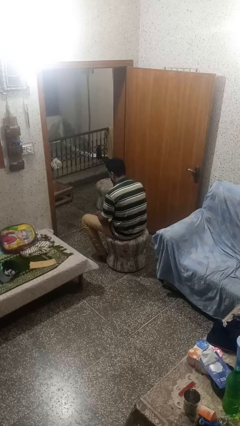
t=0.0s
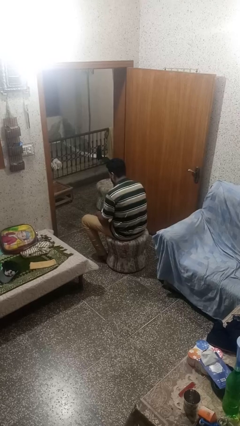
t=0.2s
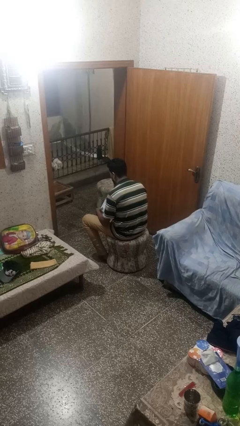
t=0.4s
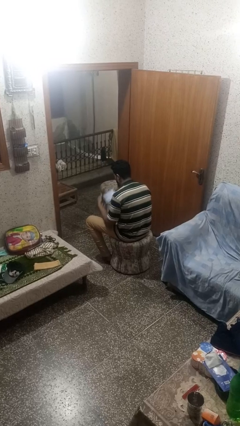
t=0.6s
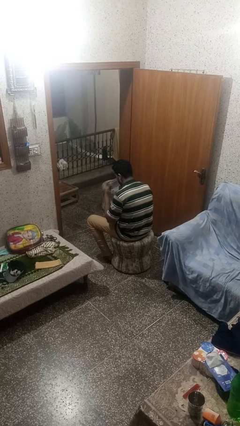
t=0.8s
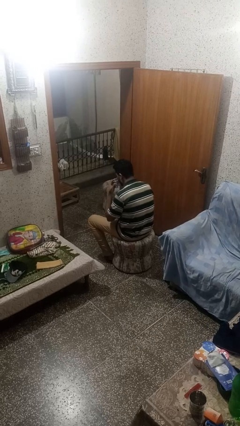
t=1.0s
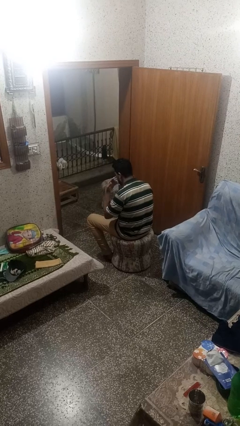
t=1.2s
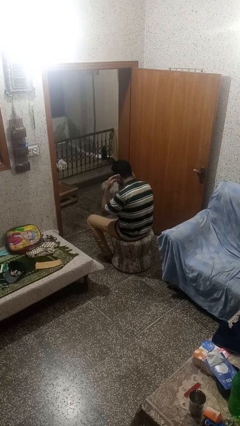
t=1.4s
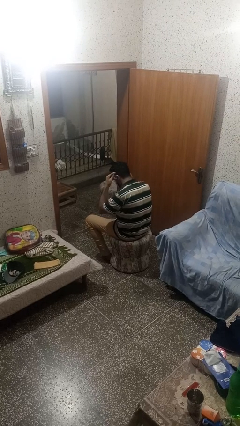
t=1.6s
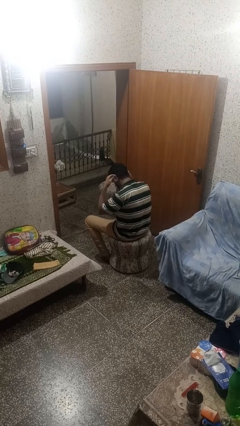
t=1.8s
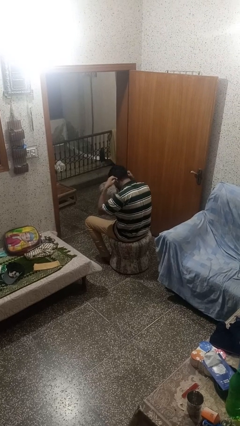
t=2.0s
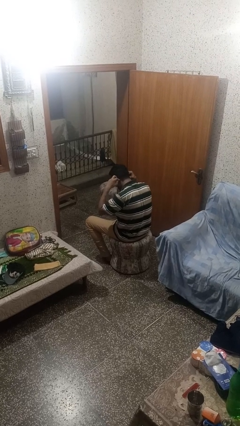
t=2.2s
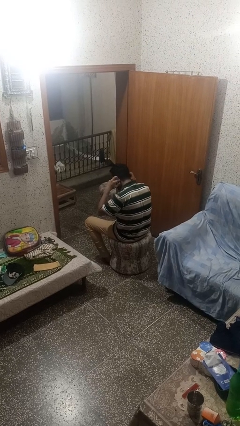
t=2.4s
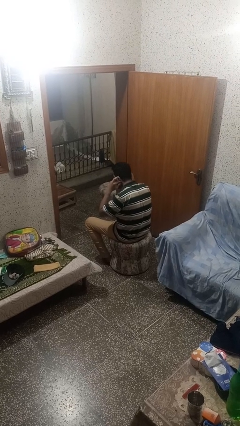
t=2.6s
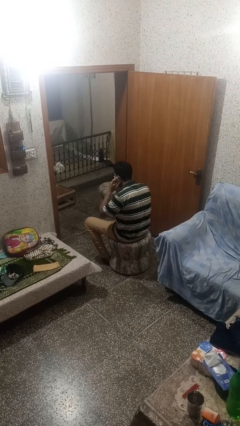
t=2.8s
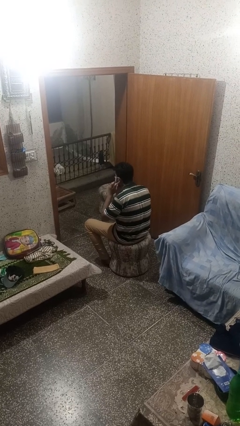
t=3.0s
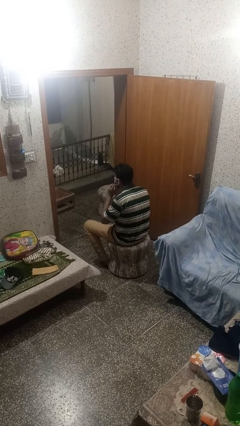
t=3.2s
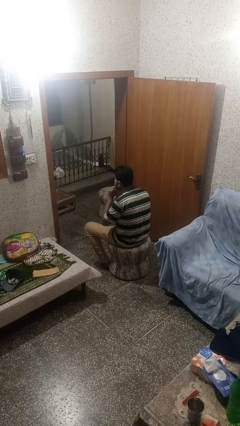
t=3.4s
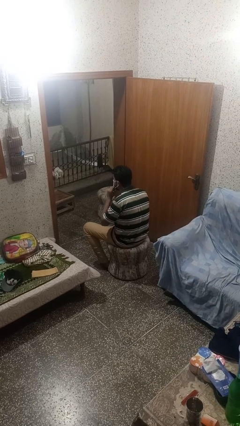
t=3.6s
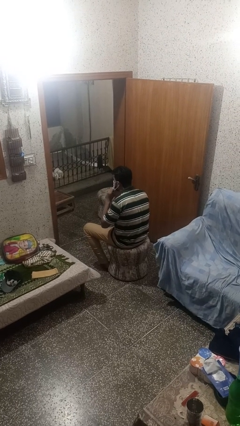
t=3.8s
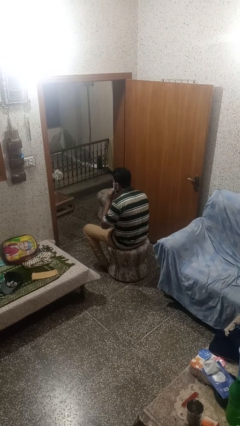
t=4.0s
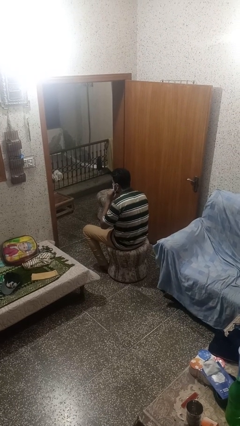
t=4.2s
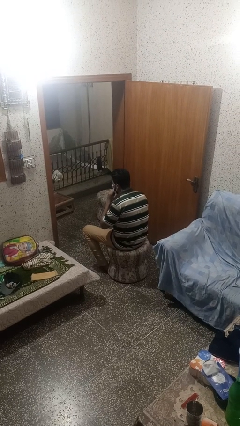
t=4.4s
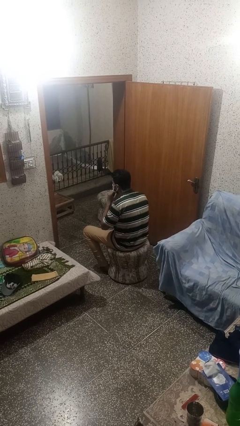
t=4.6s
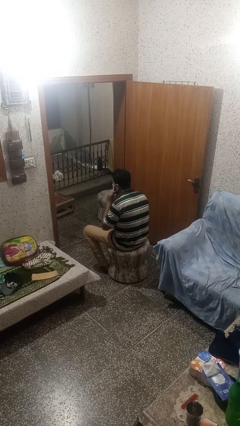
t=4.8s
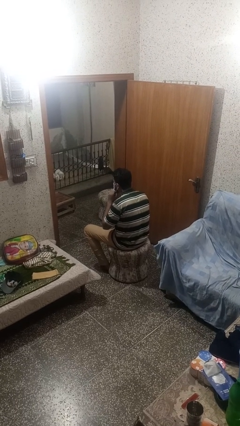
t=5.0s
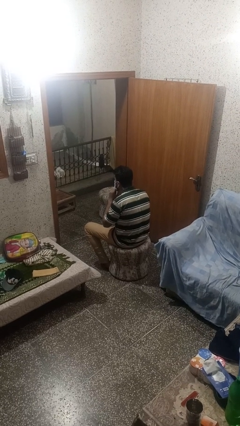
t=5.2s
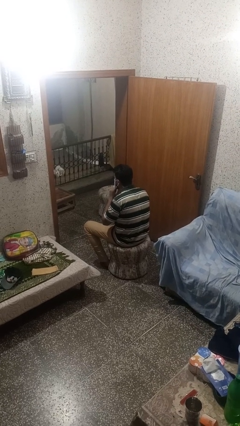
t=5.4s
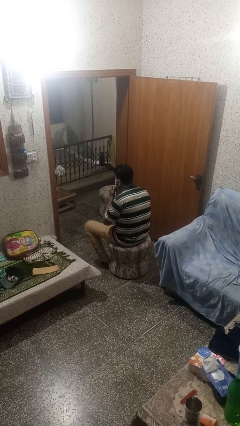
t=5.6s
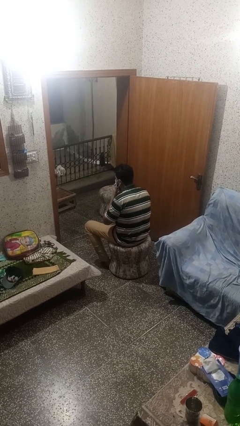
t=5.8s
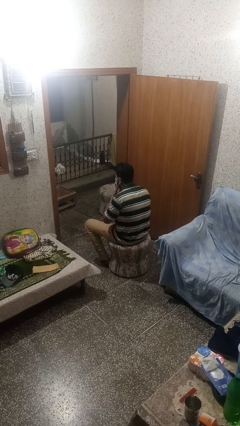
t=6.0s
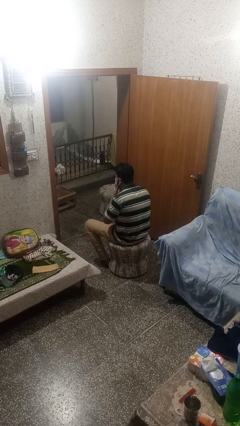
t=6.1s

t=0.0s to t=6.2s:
person puts on facemask

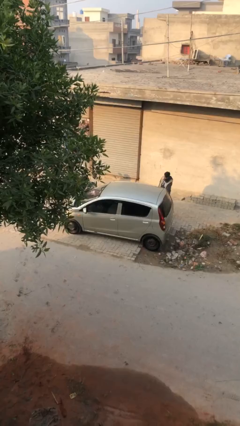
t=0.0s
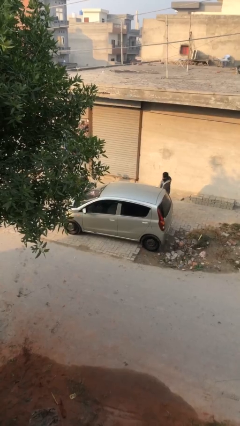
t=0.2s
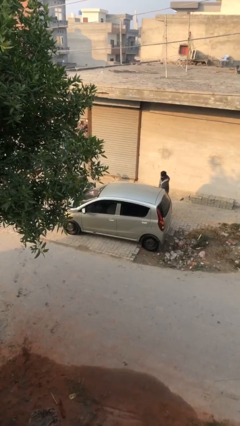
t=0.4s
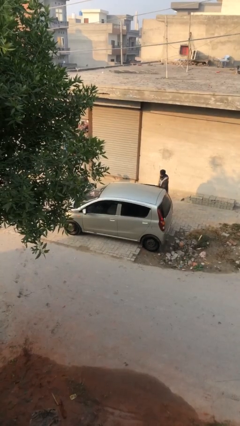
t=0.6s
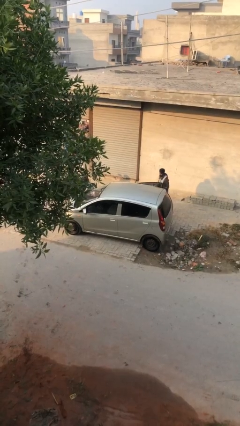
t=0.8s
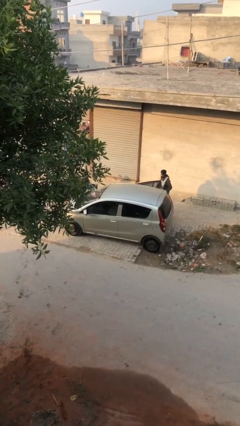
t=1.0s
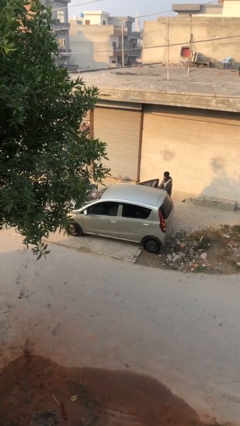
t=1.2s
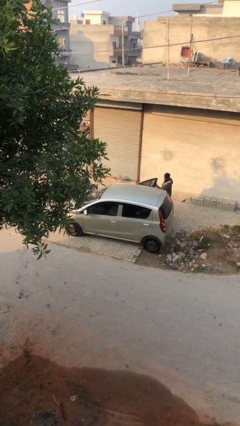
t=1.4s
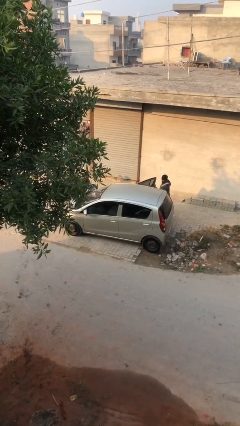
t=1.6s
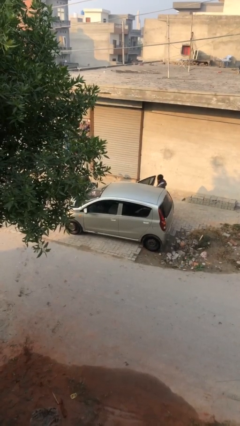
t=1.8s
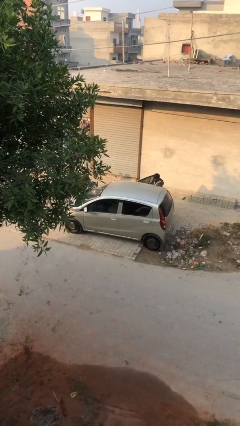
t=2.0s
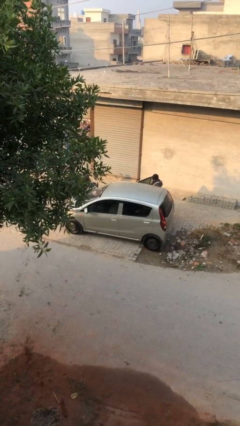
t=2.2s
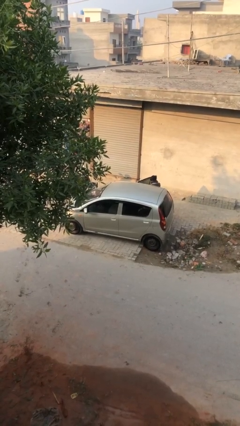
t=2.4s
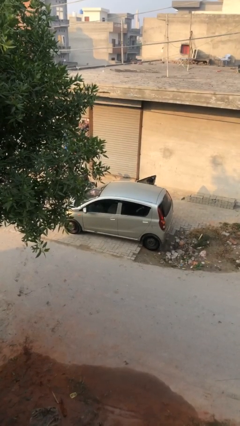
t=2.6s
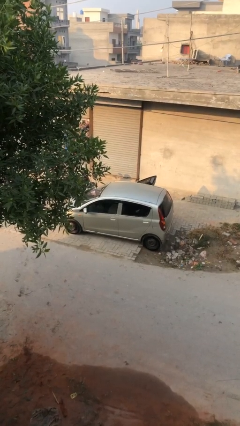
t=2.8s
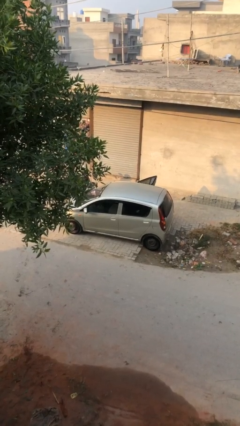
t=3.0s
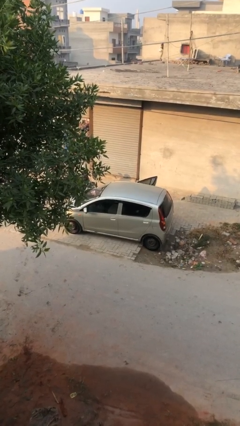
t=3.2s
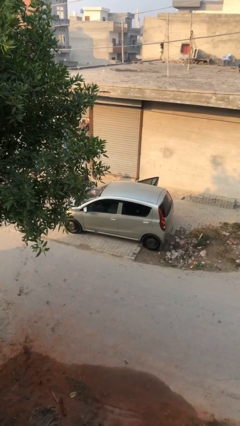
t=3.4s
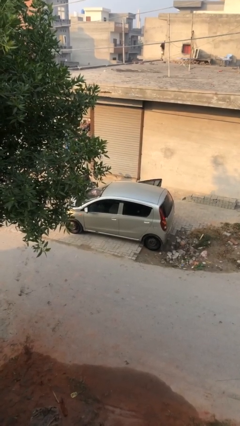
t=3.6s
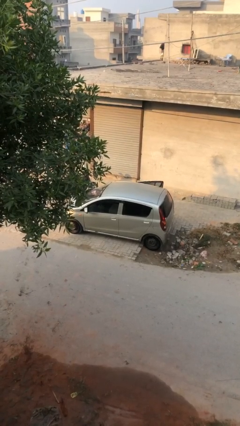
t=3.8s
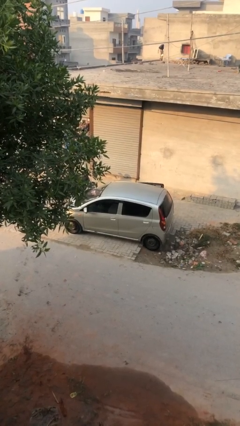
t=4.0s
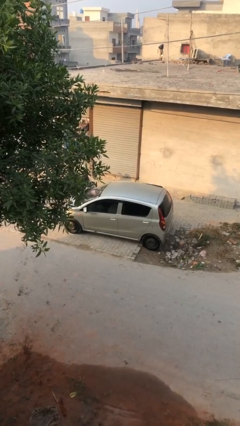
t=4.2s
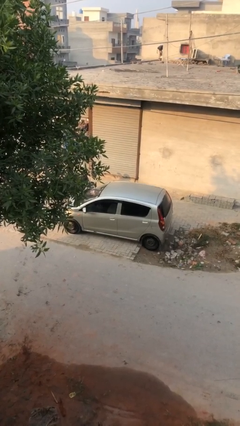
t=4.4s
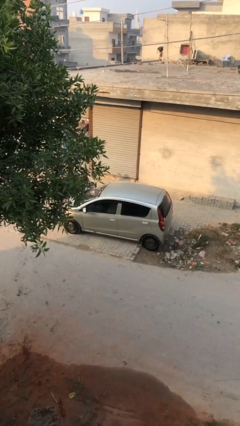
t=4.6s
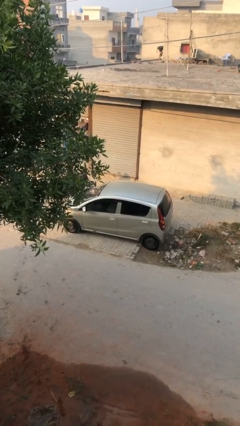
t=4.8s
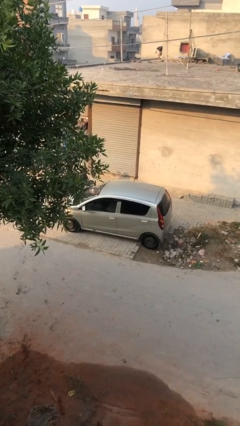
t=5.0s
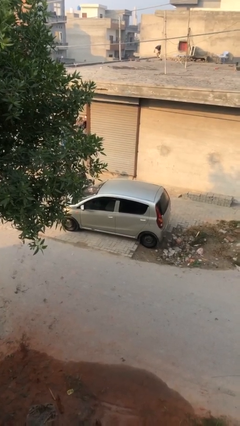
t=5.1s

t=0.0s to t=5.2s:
car picks up person

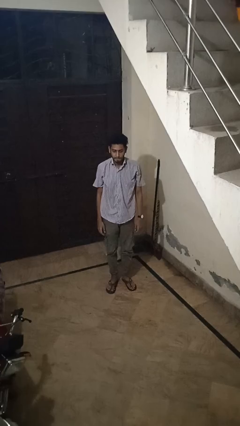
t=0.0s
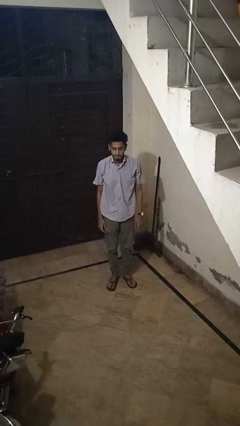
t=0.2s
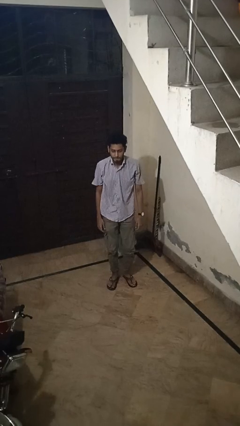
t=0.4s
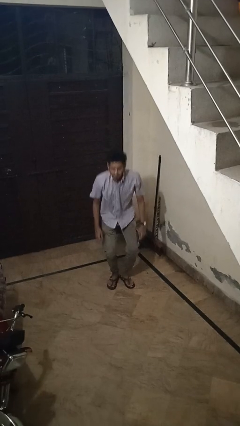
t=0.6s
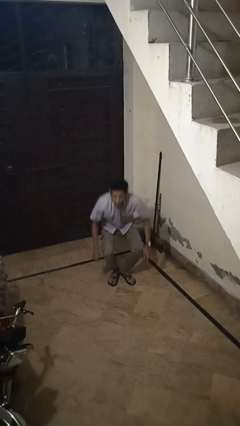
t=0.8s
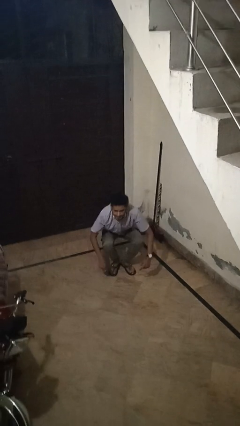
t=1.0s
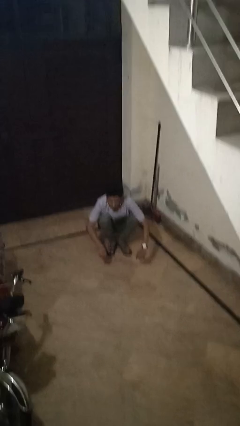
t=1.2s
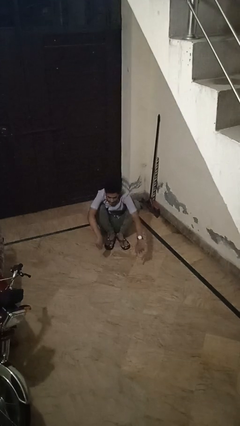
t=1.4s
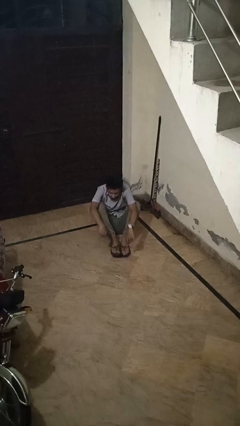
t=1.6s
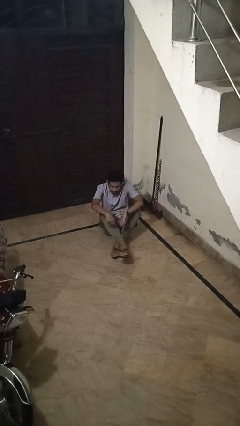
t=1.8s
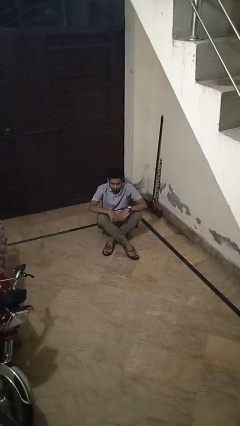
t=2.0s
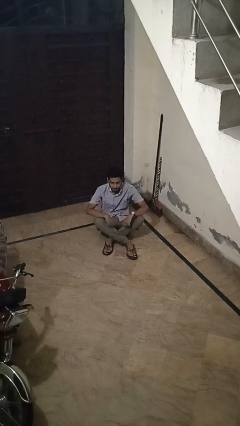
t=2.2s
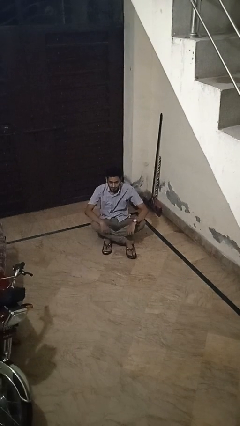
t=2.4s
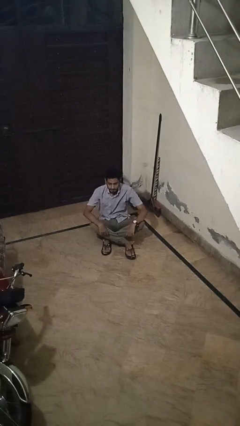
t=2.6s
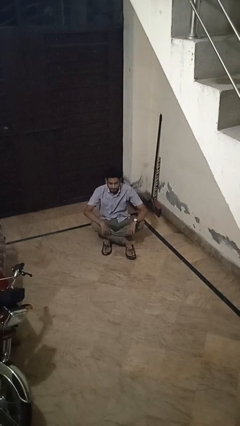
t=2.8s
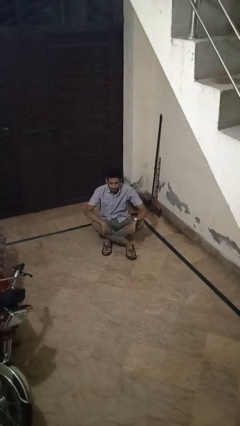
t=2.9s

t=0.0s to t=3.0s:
person sits crisscross

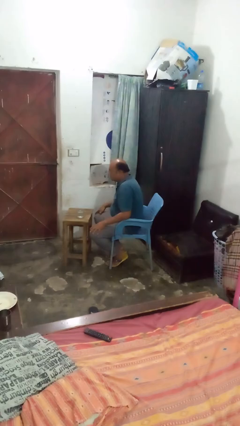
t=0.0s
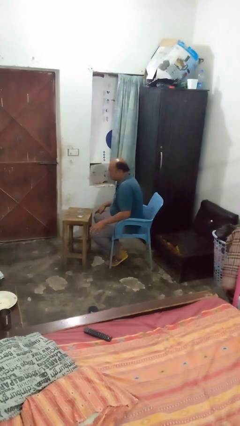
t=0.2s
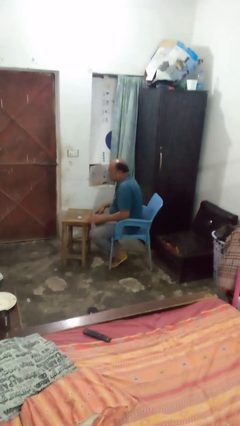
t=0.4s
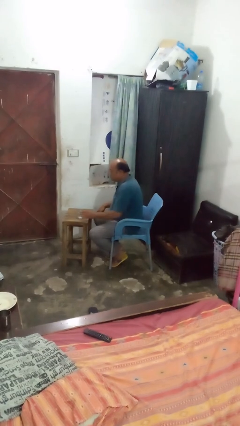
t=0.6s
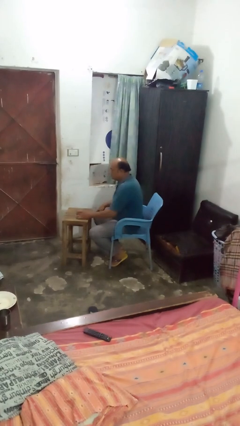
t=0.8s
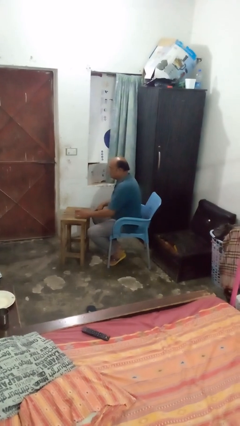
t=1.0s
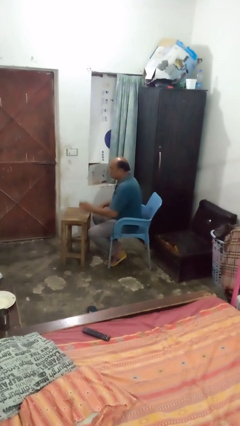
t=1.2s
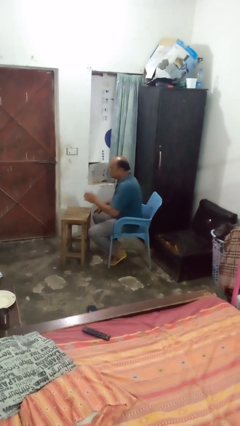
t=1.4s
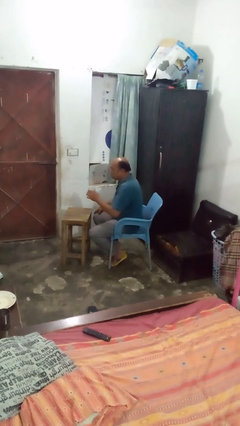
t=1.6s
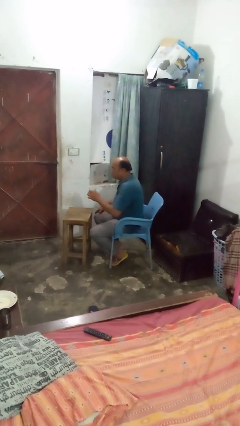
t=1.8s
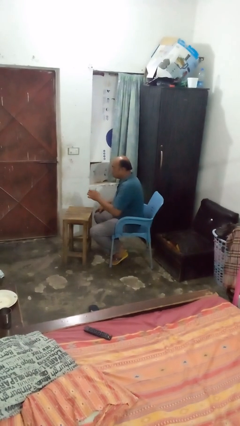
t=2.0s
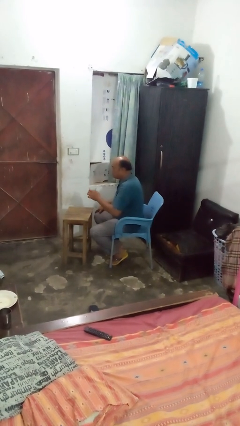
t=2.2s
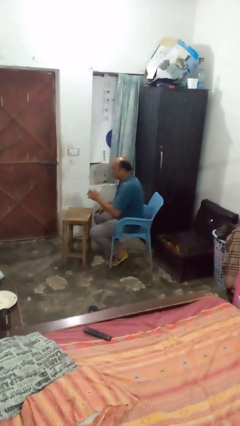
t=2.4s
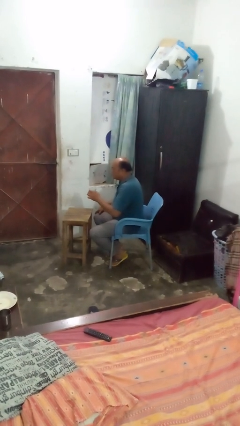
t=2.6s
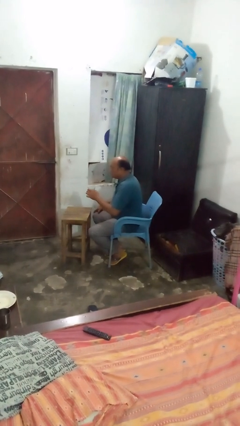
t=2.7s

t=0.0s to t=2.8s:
person picks up object from table

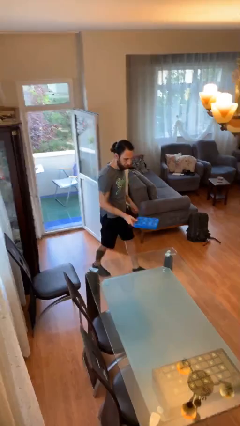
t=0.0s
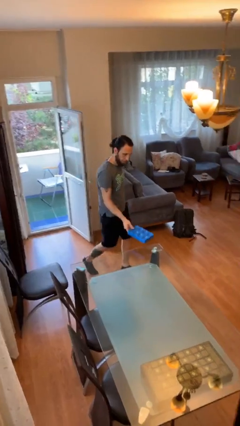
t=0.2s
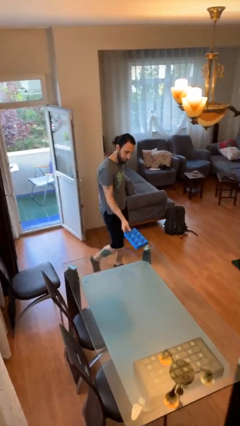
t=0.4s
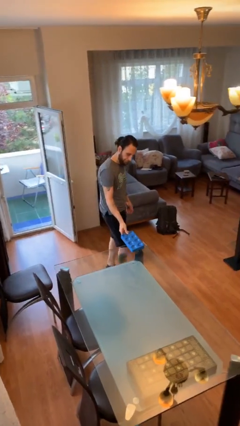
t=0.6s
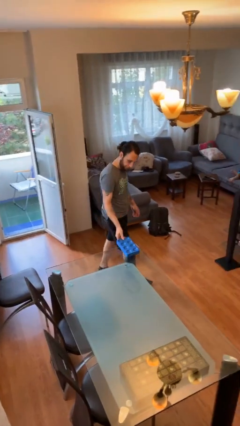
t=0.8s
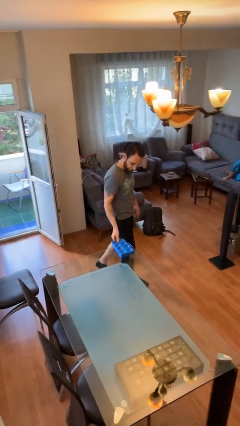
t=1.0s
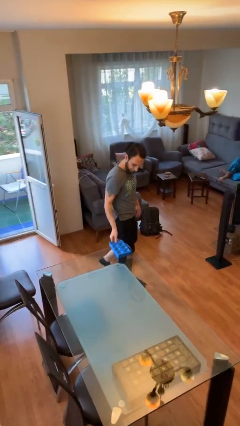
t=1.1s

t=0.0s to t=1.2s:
person puts down object on table
